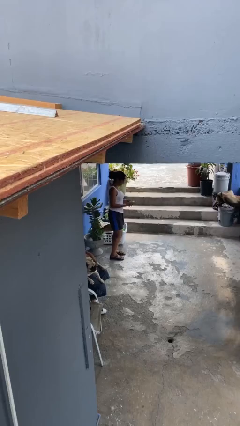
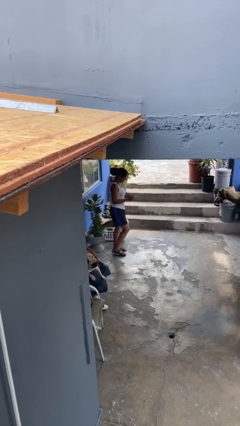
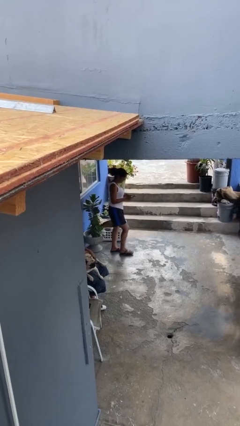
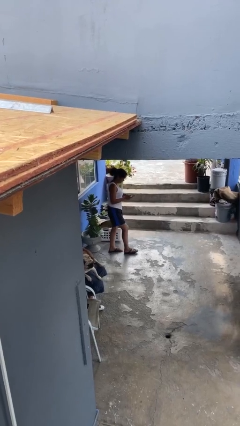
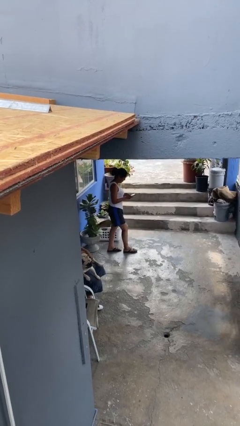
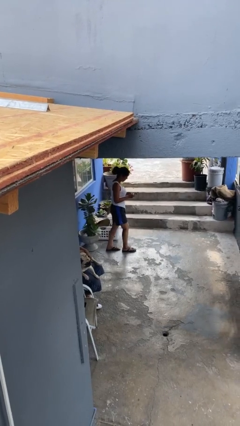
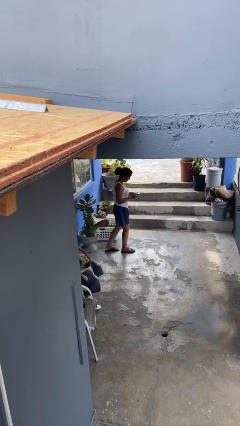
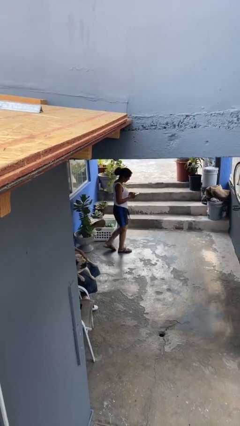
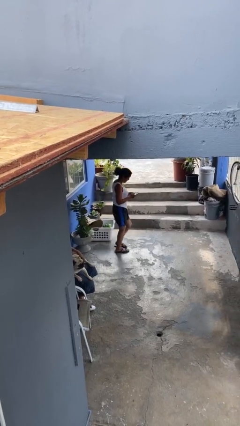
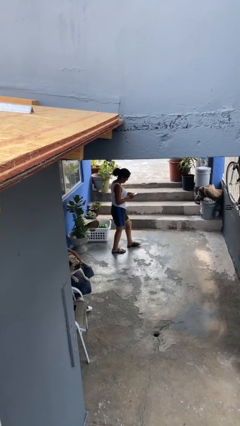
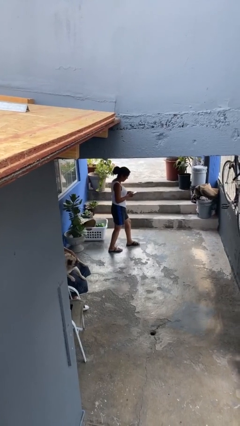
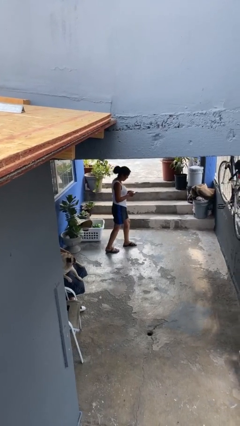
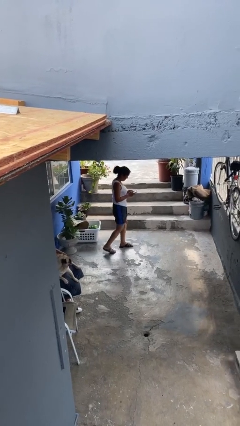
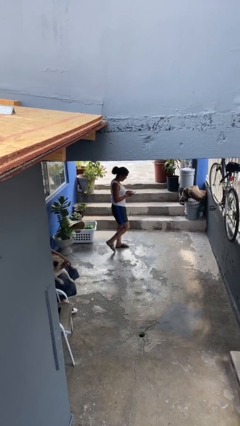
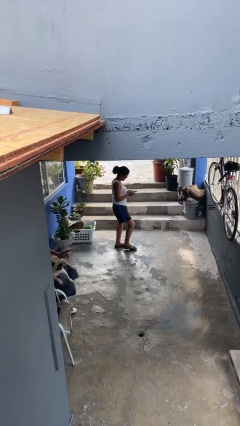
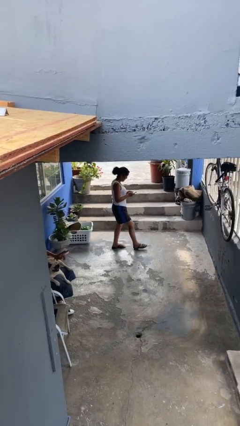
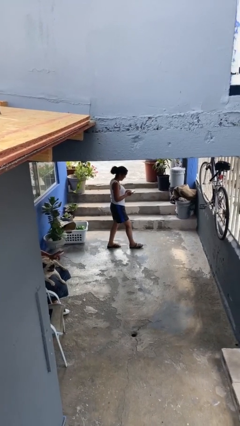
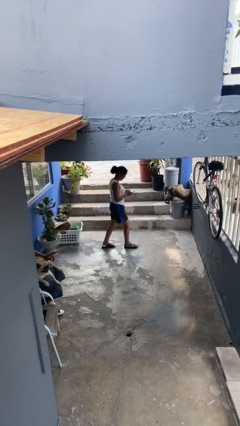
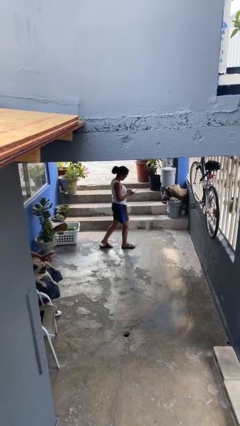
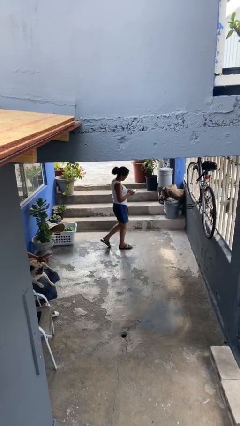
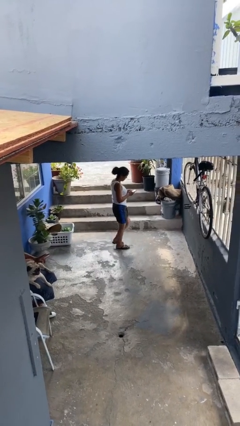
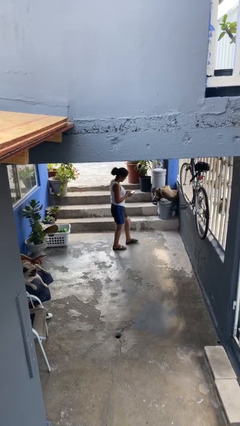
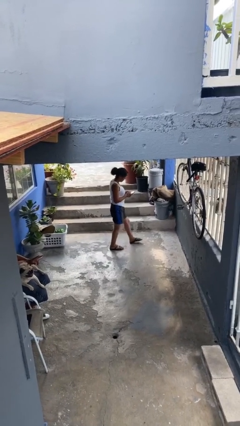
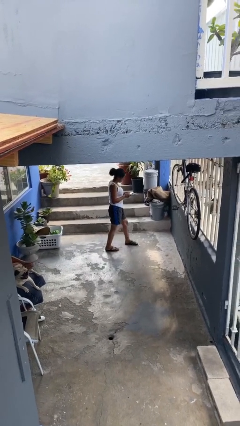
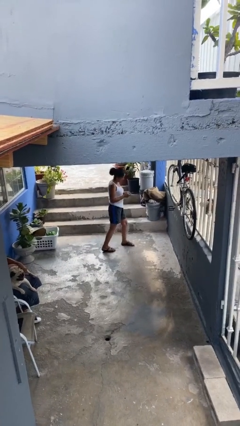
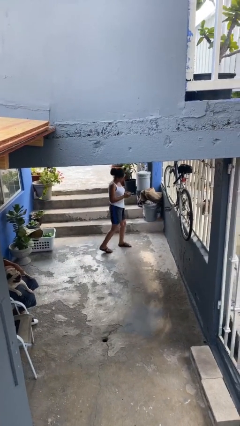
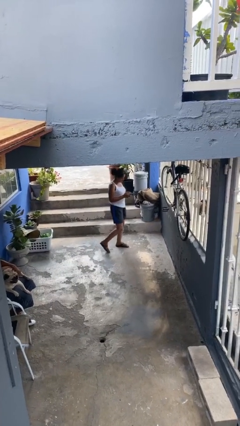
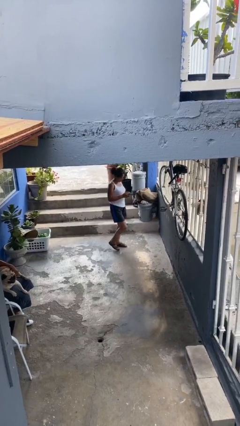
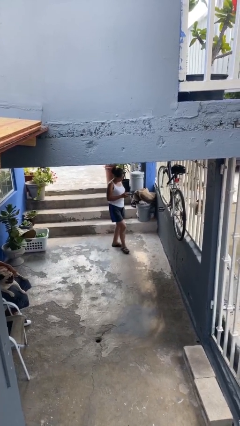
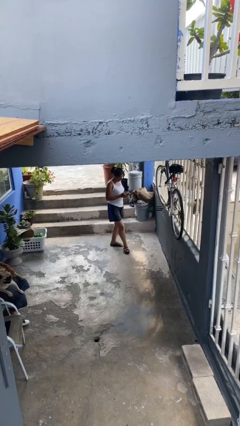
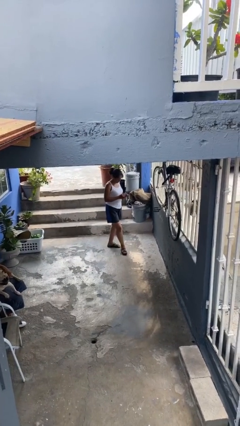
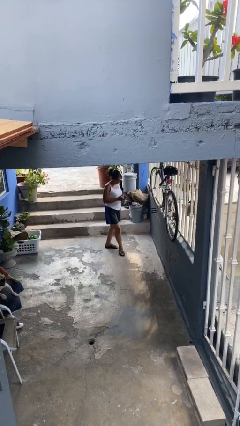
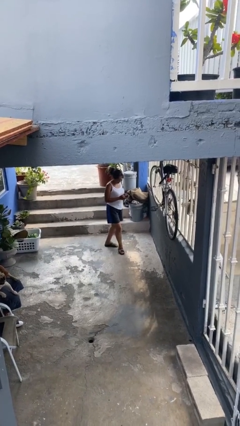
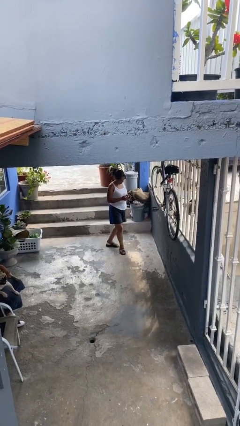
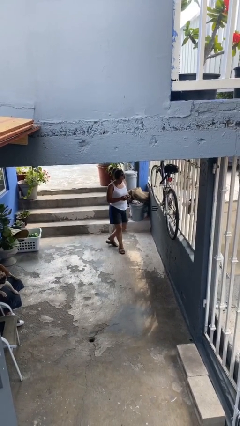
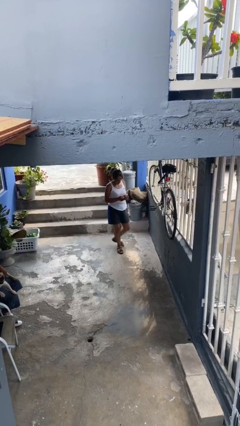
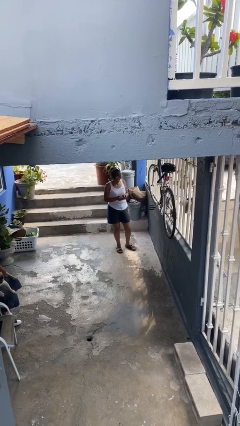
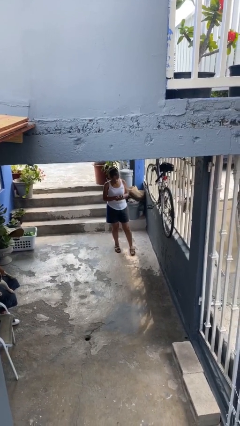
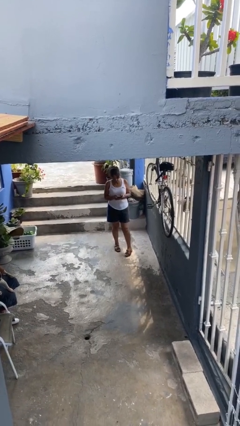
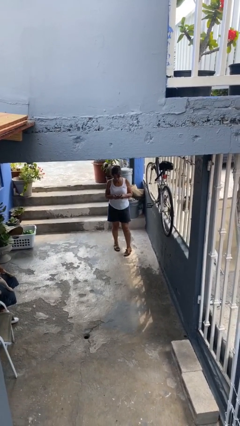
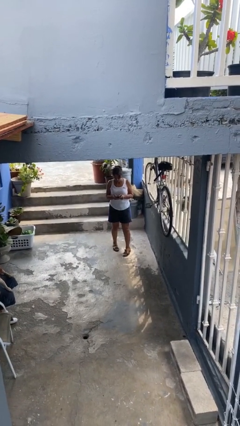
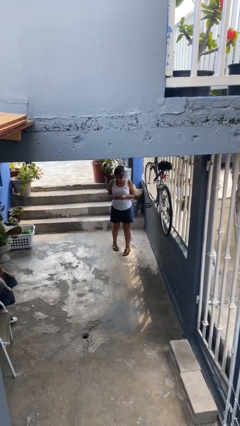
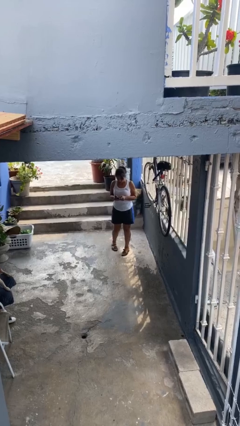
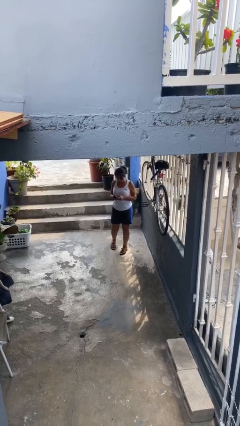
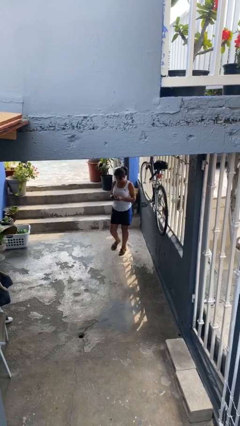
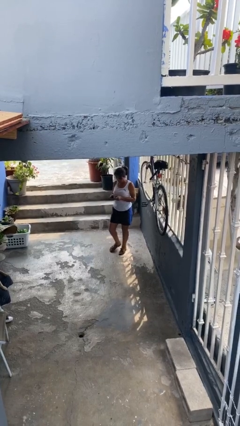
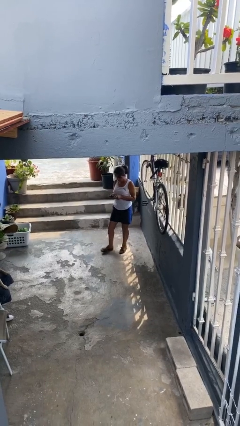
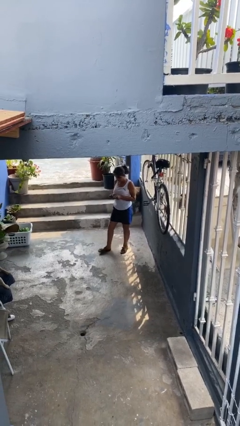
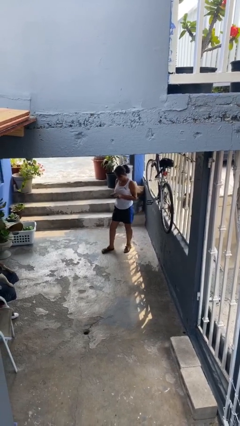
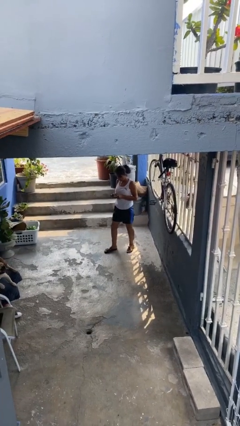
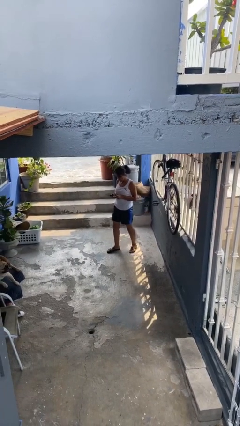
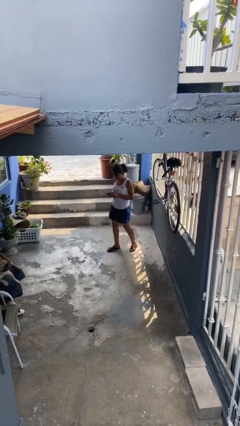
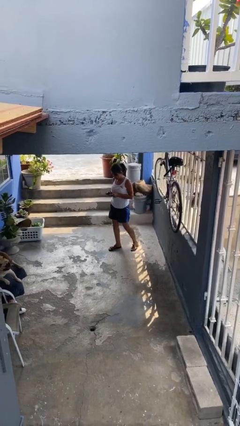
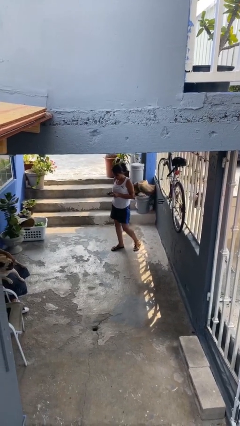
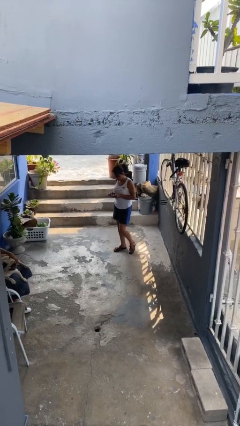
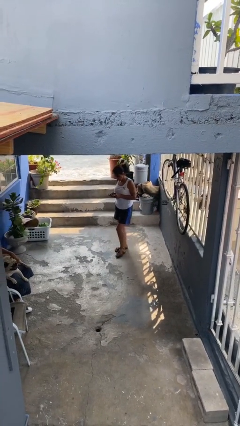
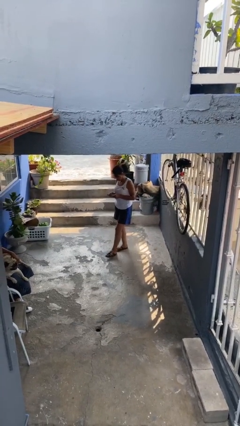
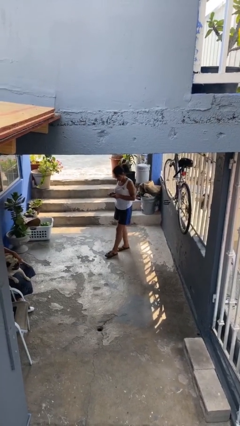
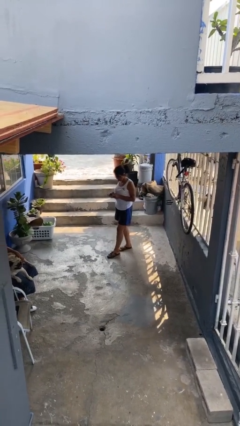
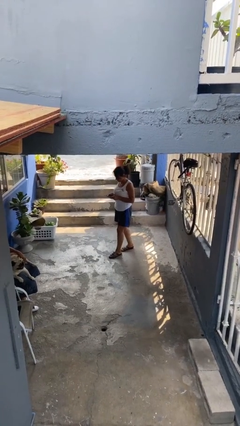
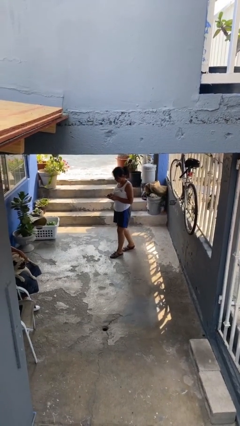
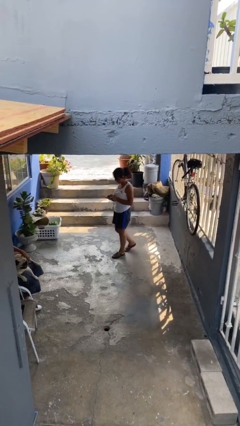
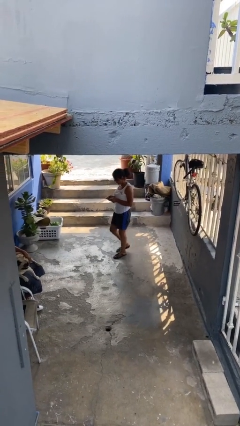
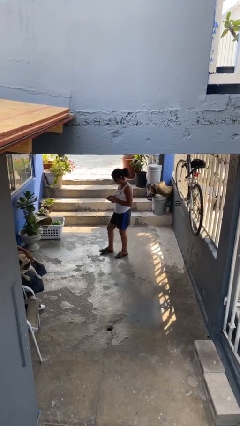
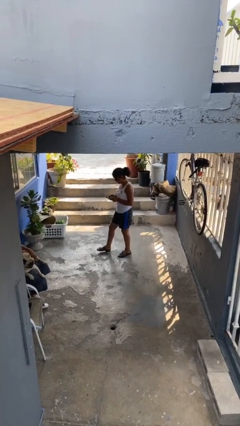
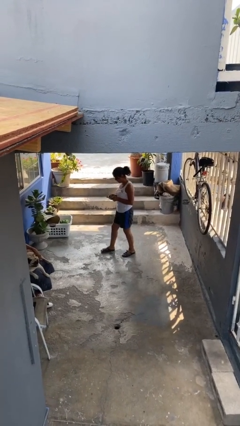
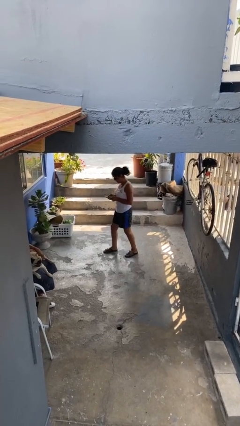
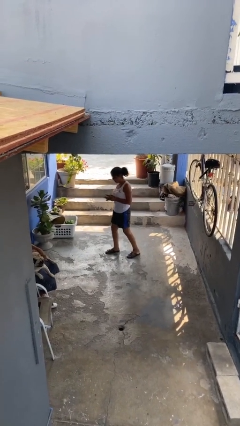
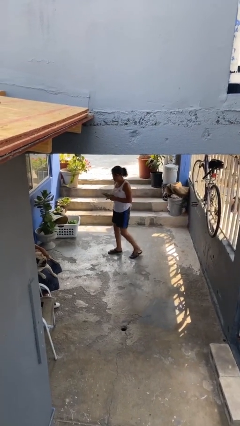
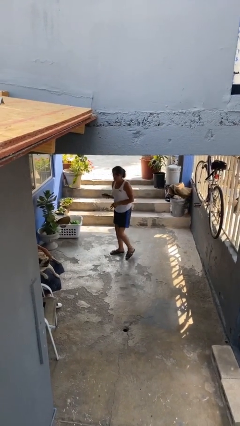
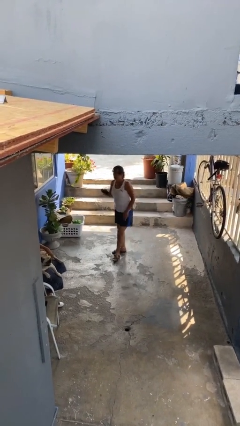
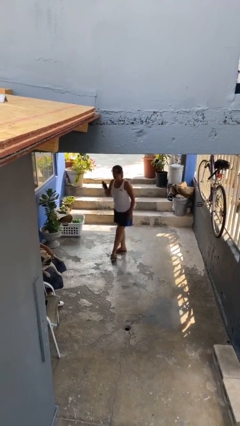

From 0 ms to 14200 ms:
person texts on phone

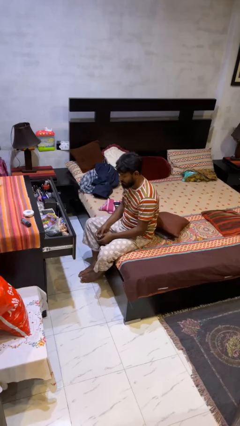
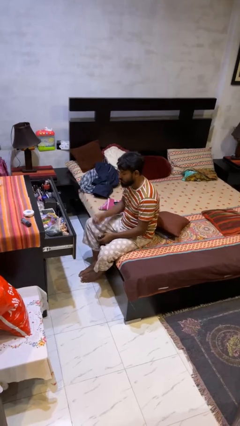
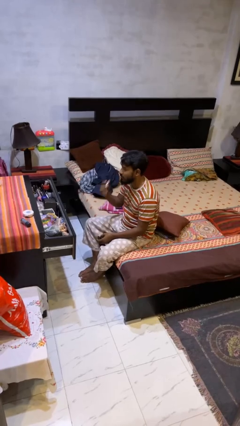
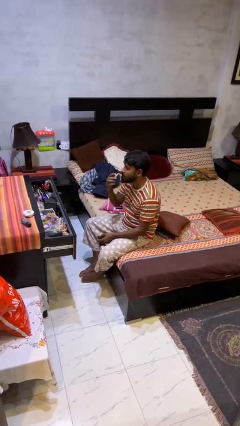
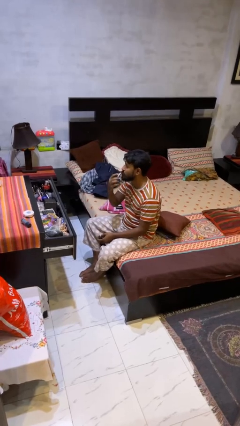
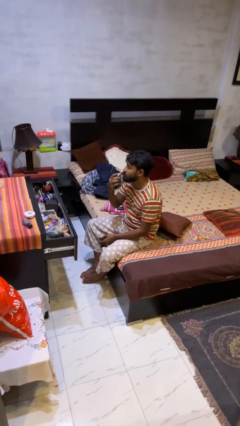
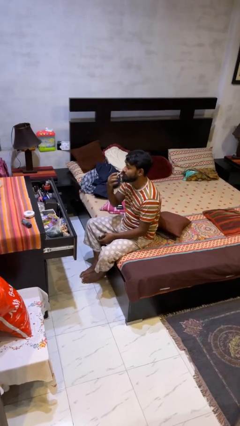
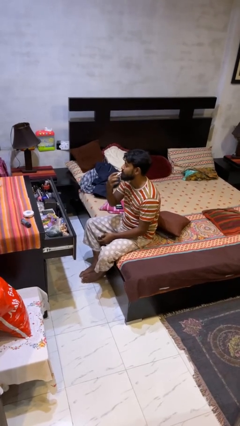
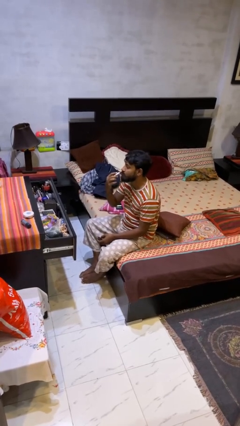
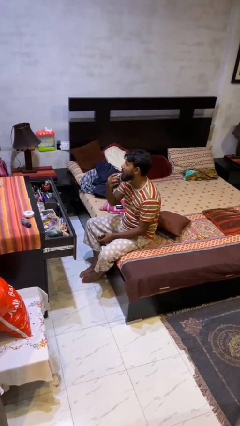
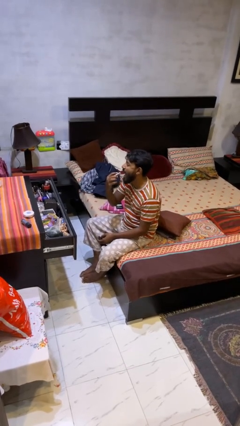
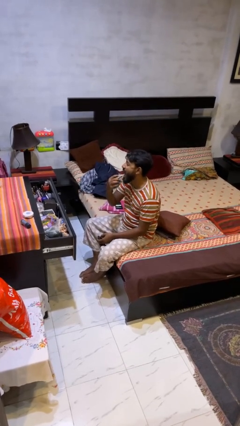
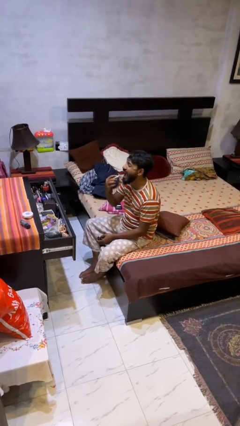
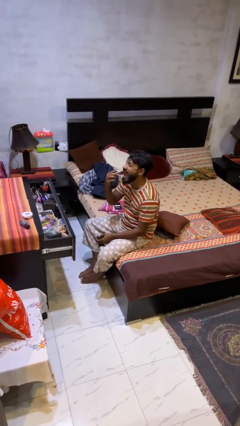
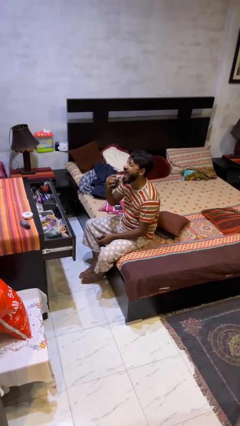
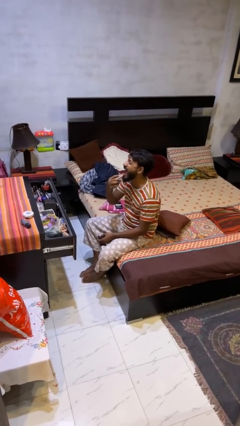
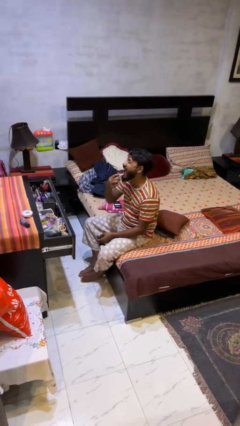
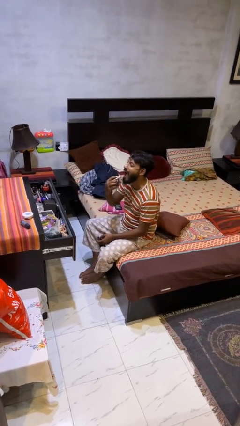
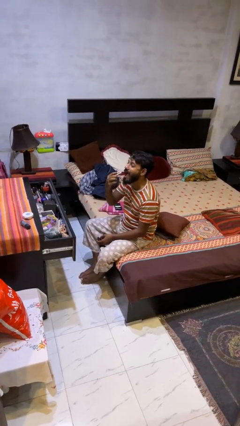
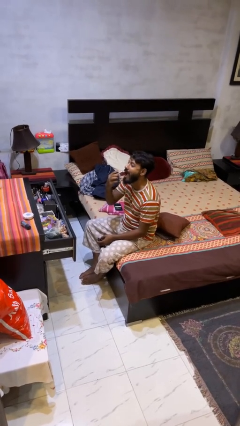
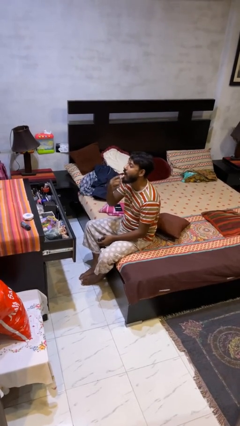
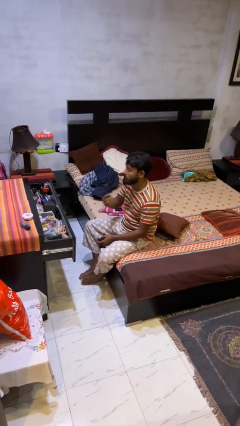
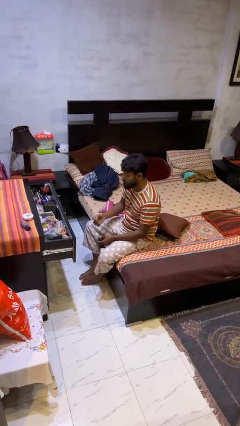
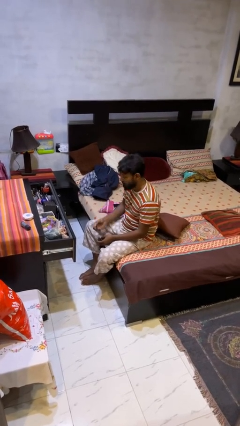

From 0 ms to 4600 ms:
person applies lip makeup
